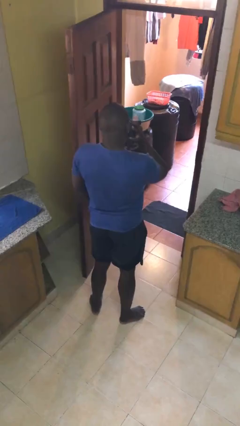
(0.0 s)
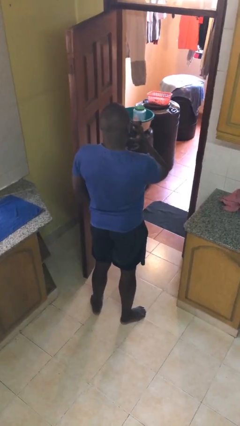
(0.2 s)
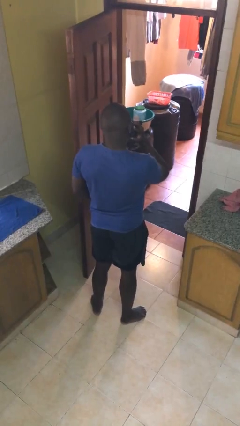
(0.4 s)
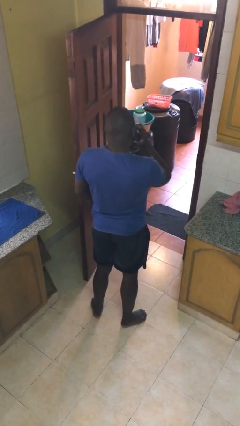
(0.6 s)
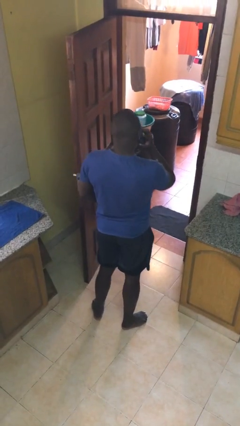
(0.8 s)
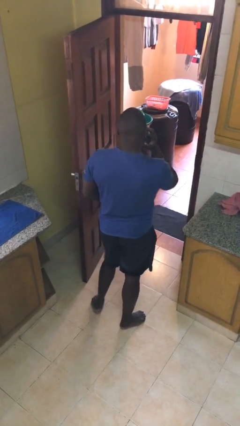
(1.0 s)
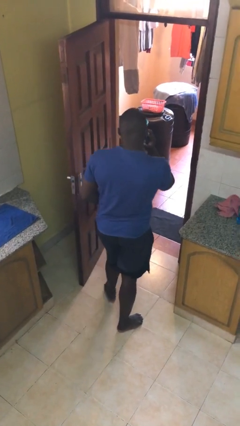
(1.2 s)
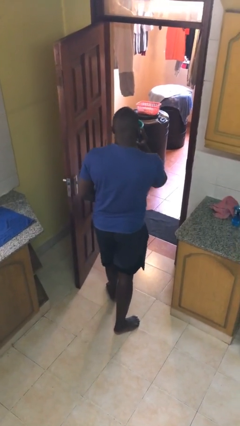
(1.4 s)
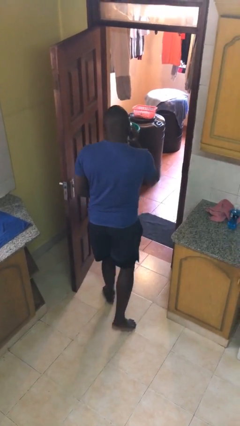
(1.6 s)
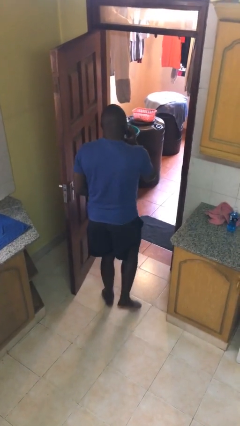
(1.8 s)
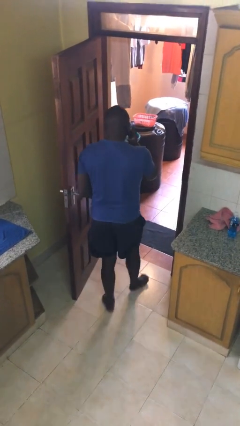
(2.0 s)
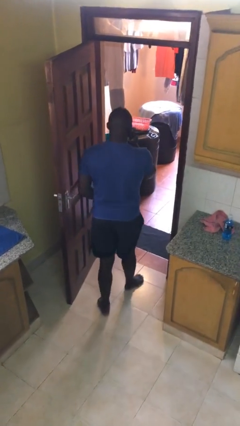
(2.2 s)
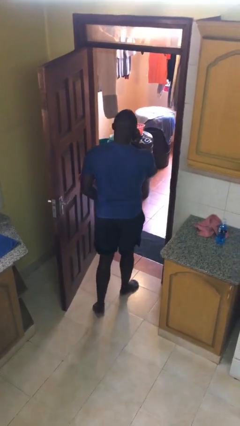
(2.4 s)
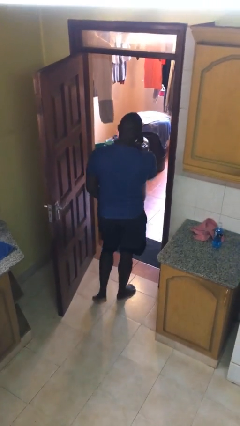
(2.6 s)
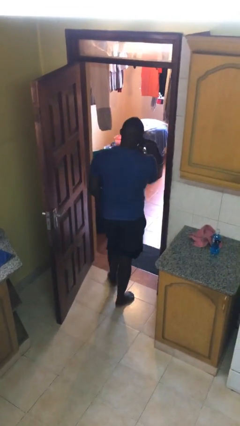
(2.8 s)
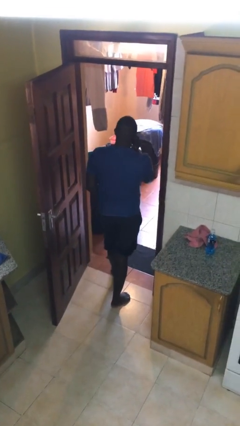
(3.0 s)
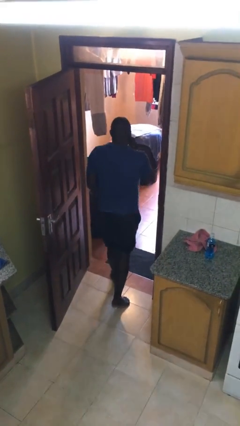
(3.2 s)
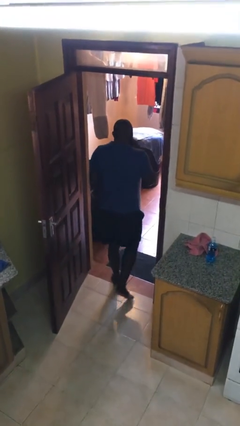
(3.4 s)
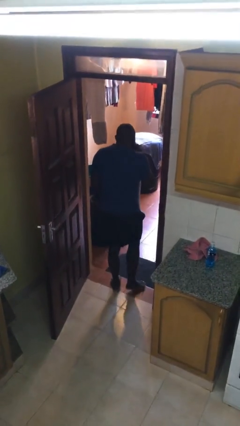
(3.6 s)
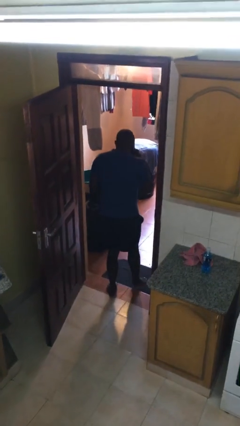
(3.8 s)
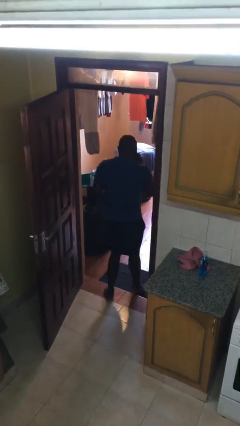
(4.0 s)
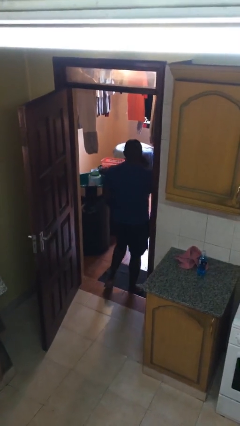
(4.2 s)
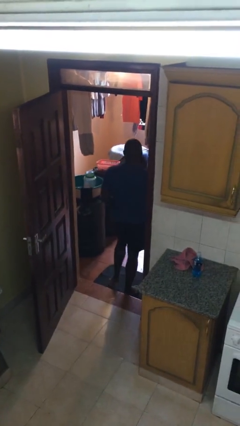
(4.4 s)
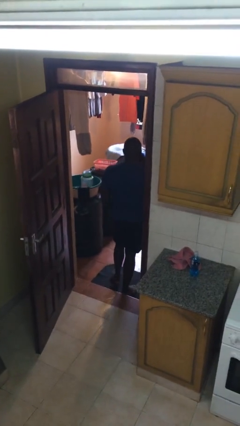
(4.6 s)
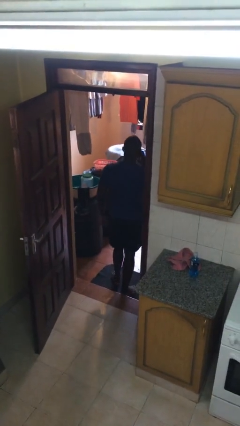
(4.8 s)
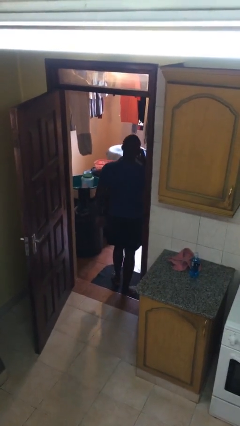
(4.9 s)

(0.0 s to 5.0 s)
person exits scene through structure

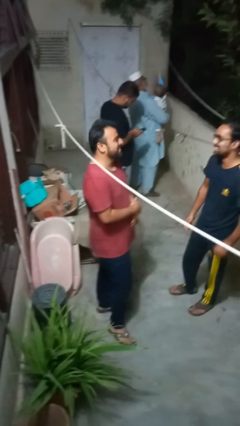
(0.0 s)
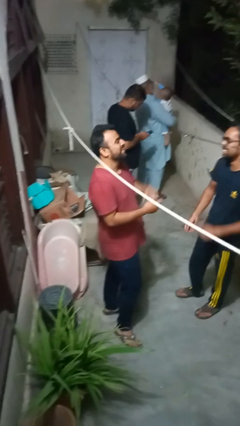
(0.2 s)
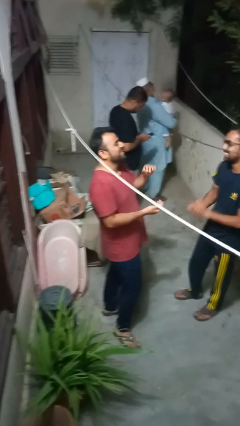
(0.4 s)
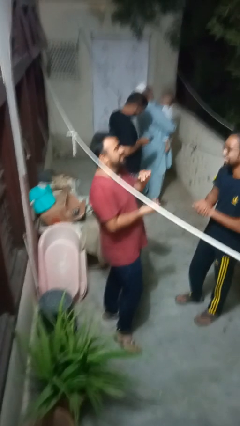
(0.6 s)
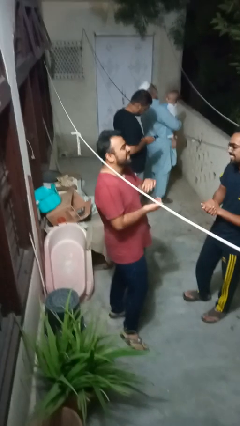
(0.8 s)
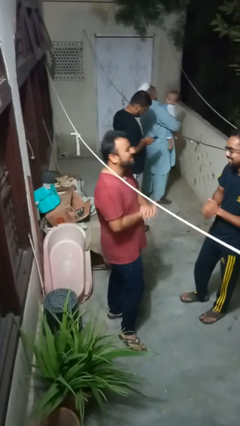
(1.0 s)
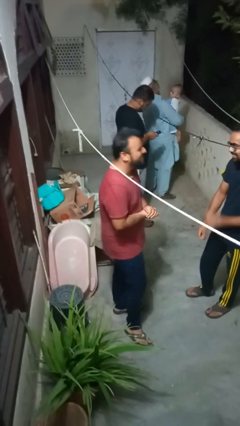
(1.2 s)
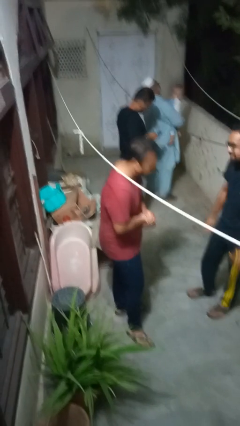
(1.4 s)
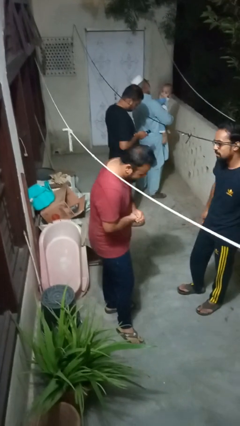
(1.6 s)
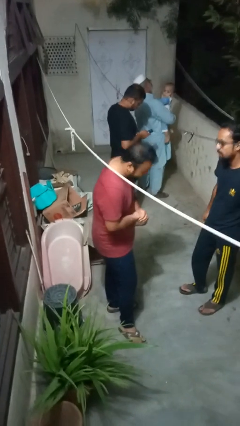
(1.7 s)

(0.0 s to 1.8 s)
person laughs with person

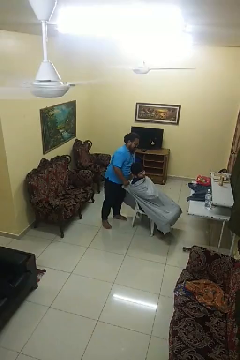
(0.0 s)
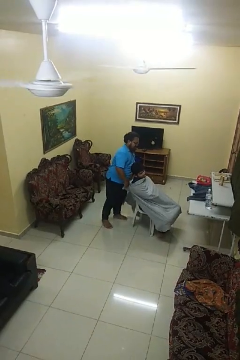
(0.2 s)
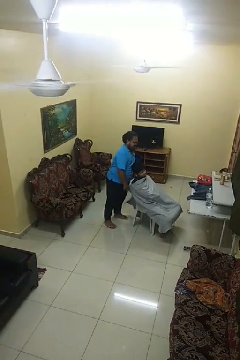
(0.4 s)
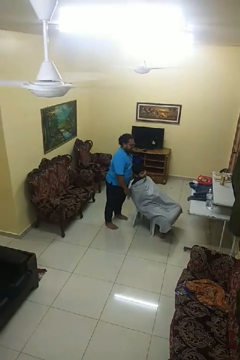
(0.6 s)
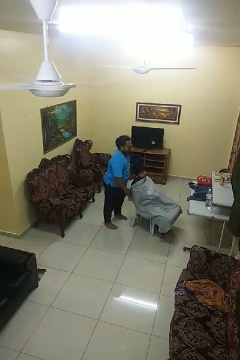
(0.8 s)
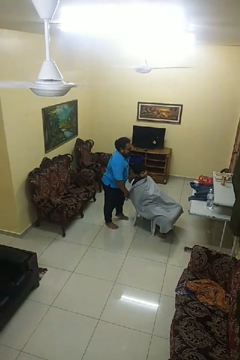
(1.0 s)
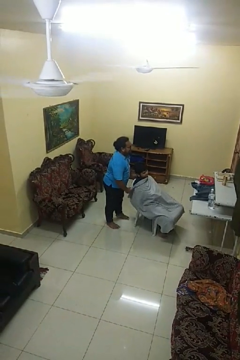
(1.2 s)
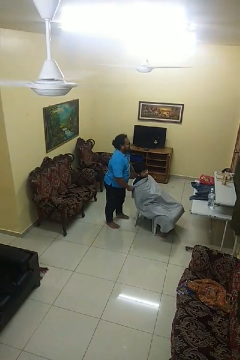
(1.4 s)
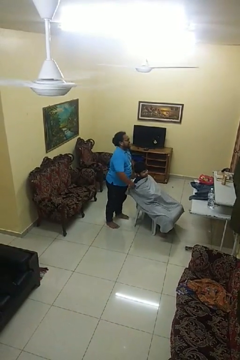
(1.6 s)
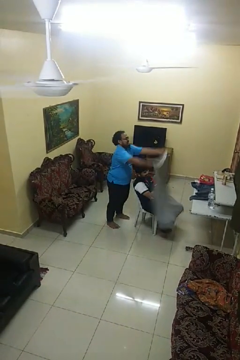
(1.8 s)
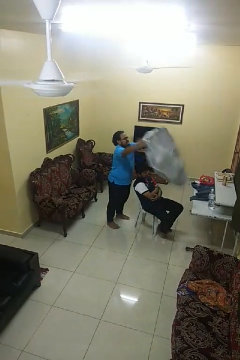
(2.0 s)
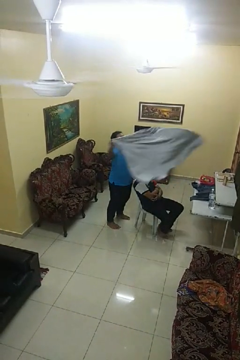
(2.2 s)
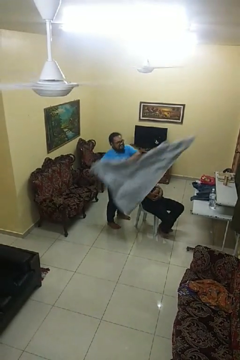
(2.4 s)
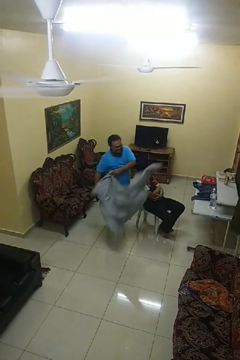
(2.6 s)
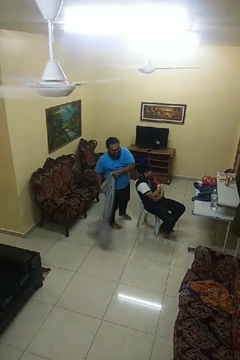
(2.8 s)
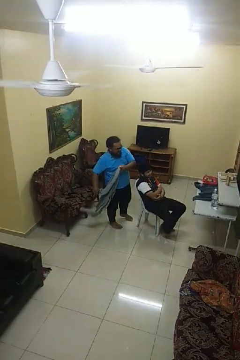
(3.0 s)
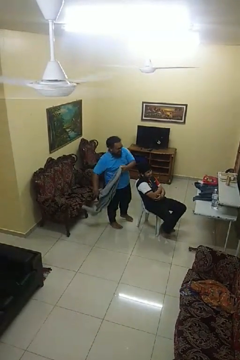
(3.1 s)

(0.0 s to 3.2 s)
person uncovers friend with blanket

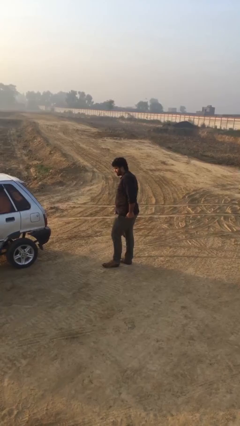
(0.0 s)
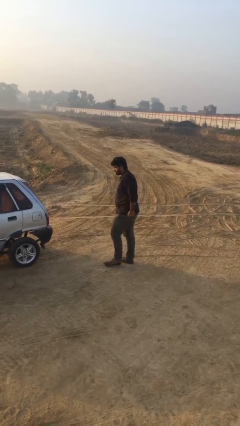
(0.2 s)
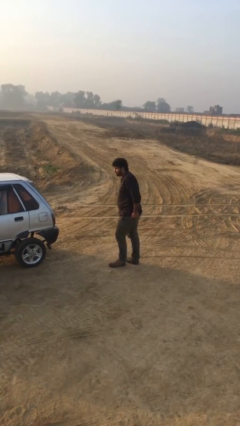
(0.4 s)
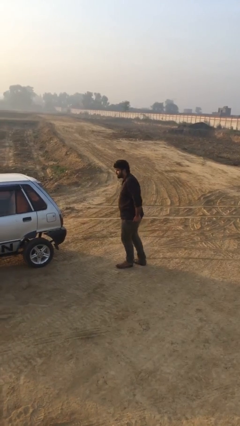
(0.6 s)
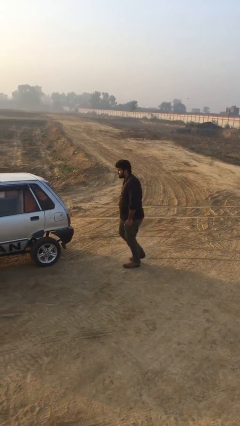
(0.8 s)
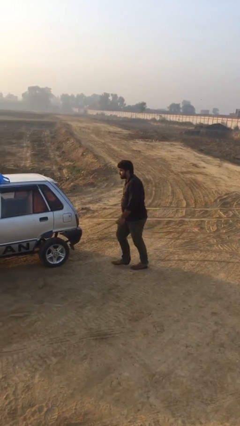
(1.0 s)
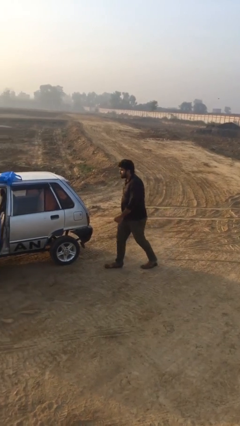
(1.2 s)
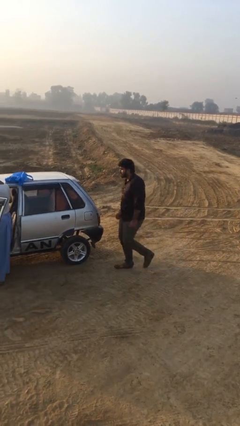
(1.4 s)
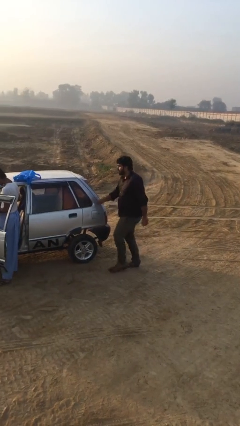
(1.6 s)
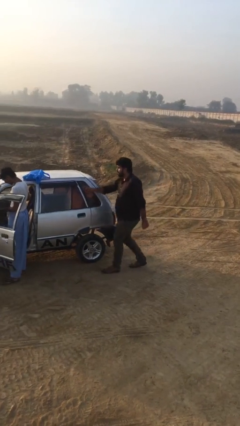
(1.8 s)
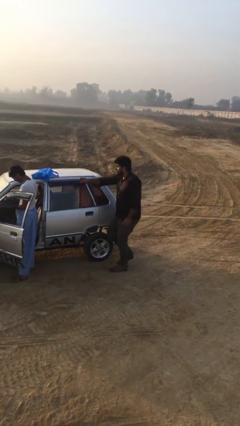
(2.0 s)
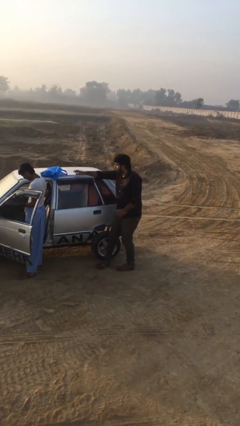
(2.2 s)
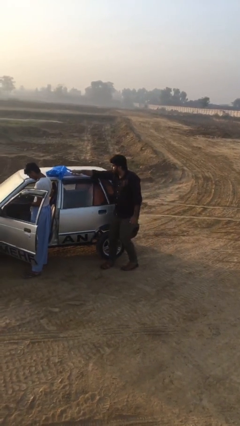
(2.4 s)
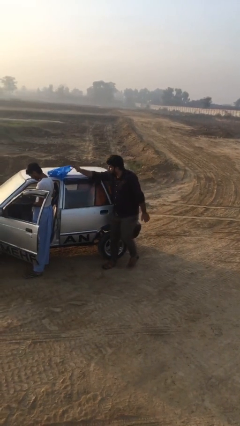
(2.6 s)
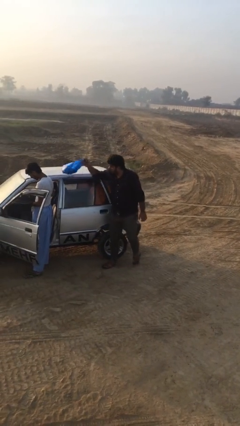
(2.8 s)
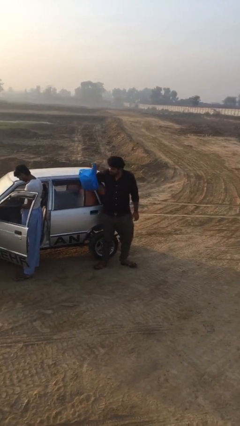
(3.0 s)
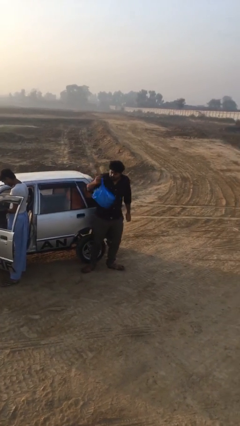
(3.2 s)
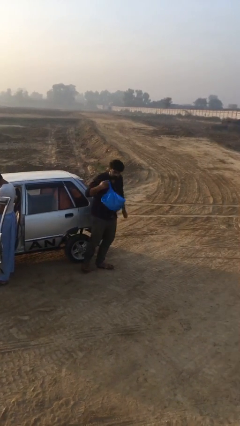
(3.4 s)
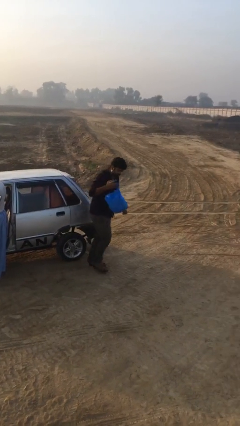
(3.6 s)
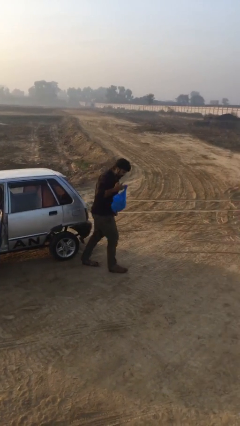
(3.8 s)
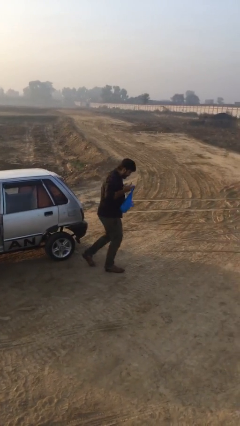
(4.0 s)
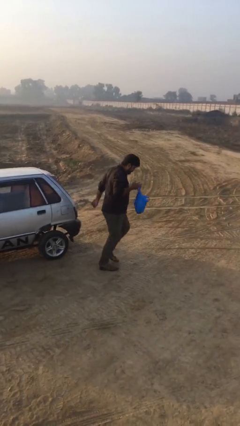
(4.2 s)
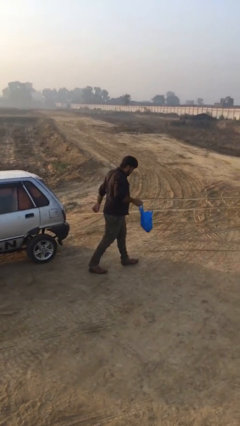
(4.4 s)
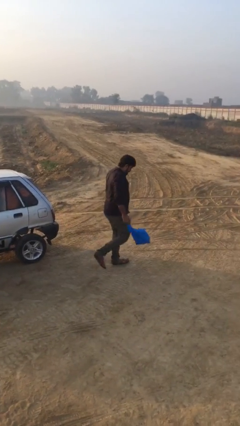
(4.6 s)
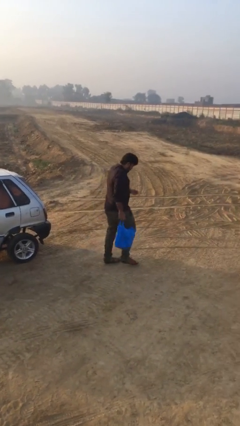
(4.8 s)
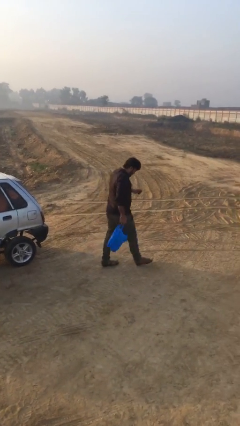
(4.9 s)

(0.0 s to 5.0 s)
person steals object from person

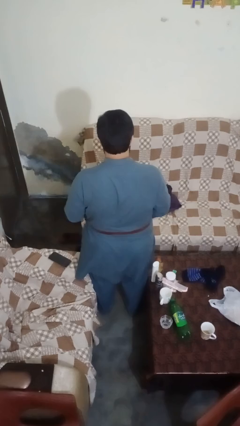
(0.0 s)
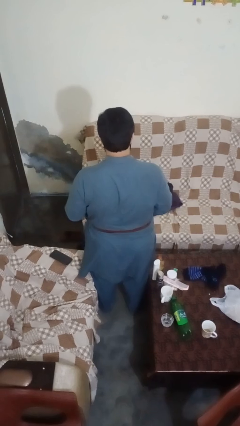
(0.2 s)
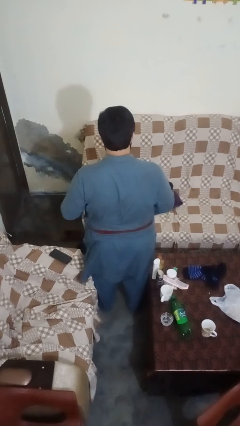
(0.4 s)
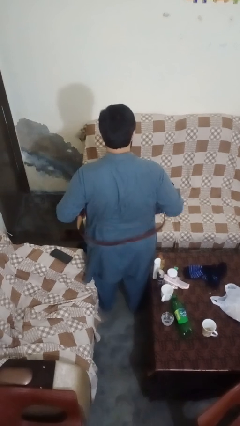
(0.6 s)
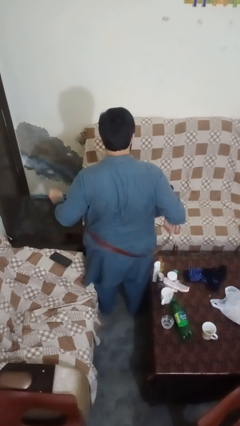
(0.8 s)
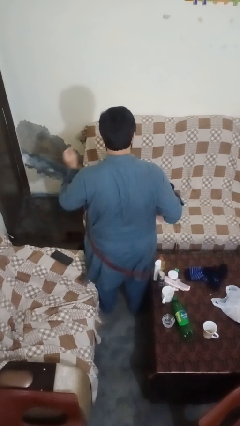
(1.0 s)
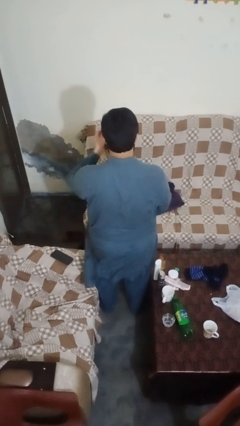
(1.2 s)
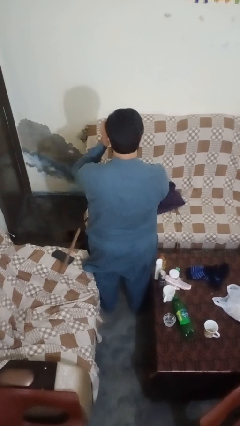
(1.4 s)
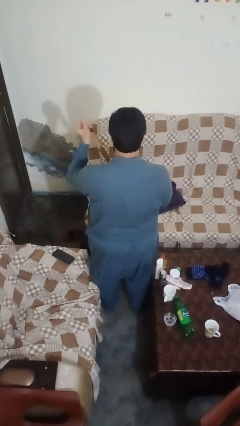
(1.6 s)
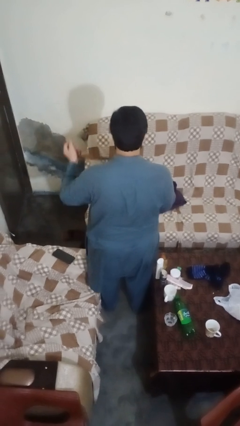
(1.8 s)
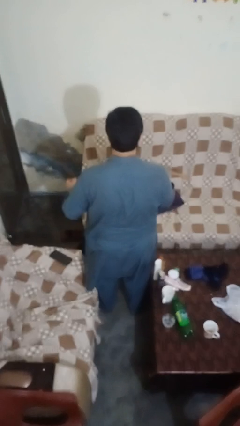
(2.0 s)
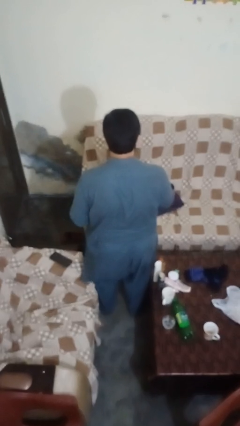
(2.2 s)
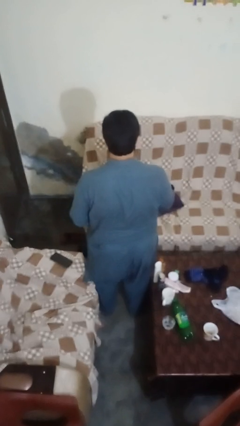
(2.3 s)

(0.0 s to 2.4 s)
person takes off belt

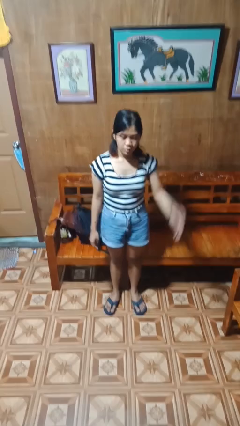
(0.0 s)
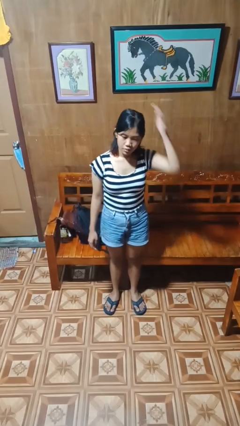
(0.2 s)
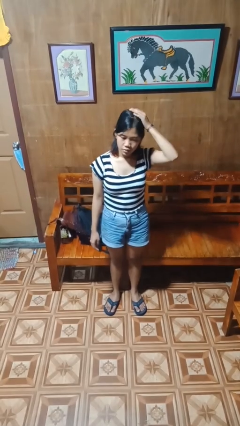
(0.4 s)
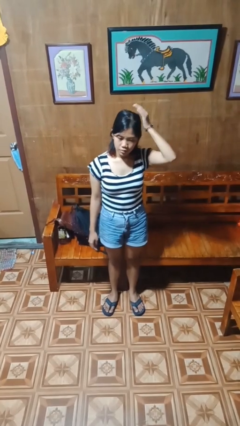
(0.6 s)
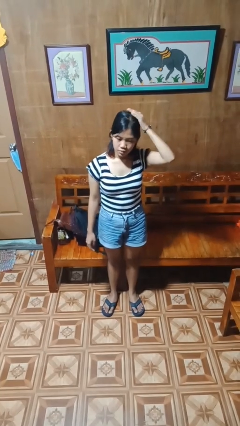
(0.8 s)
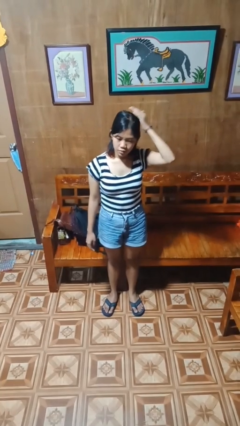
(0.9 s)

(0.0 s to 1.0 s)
person pats head

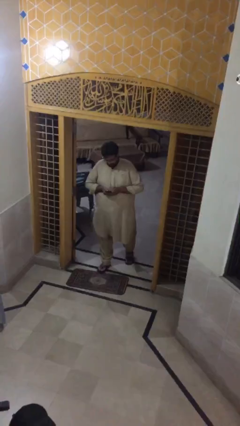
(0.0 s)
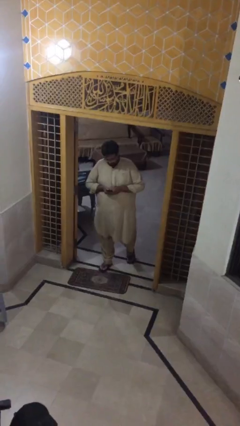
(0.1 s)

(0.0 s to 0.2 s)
person talks on phone
